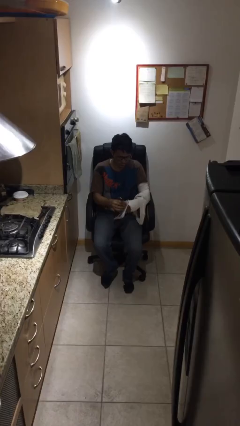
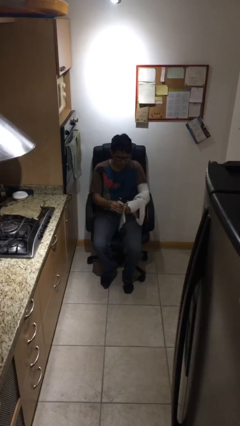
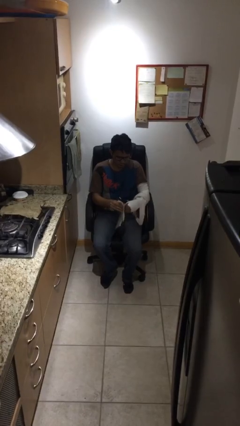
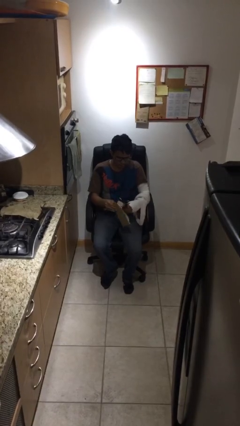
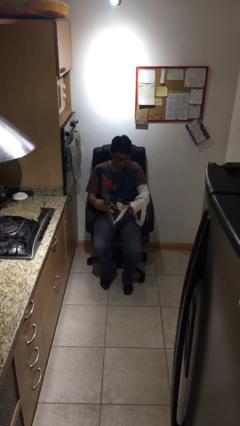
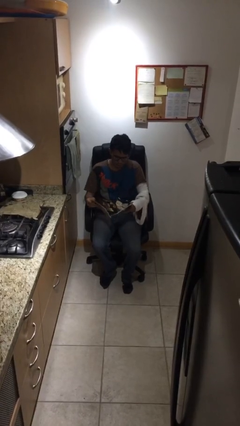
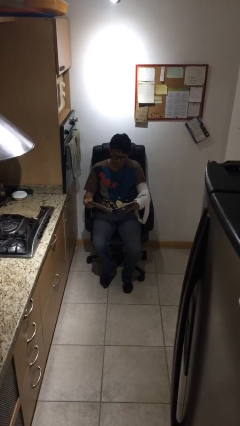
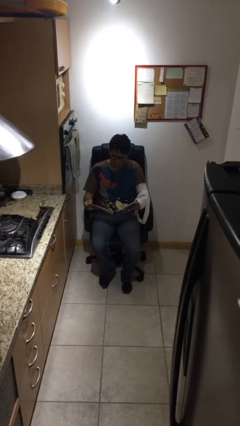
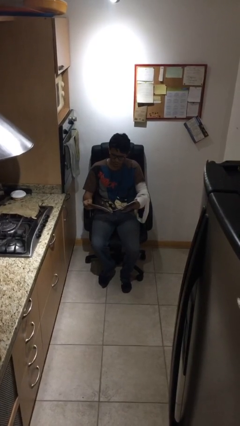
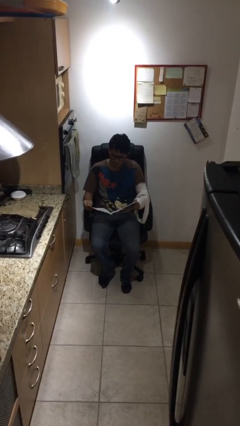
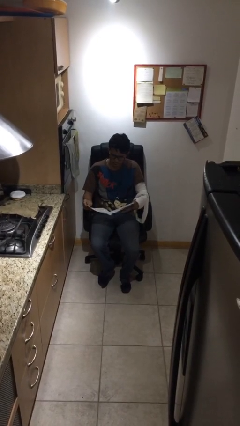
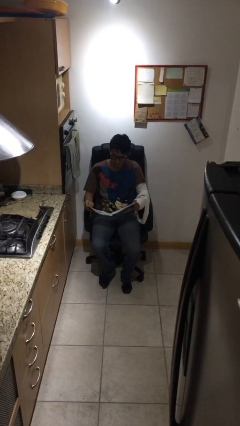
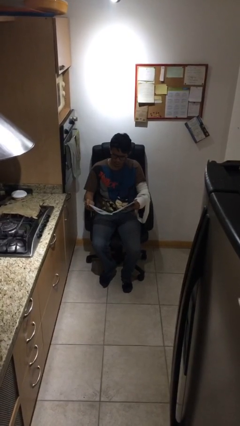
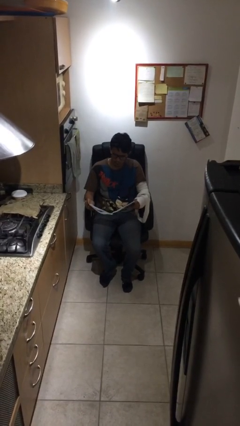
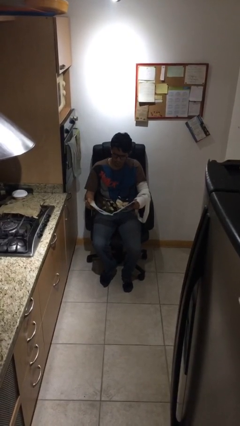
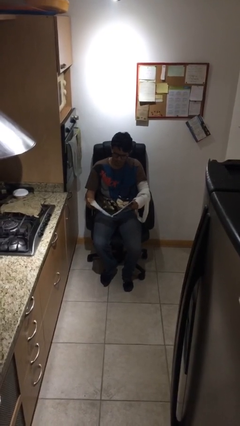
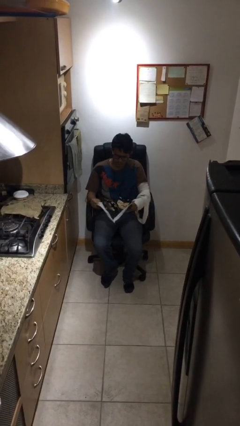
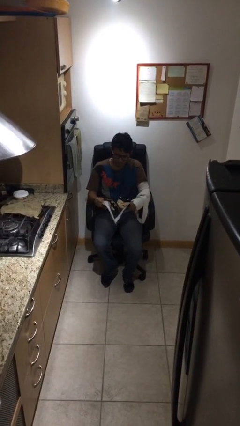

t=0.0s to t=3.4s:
person reads document

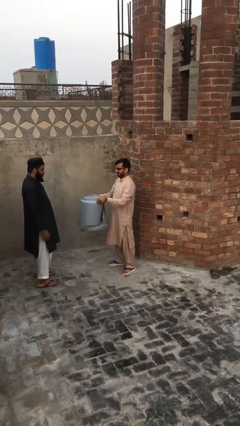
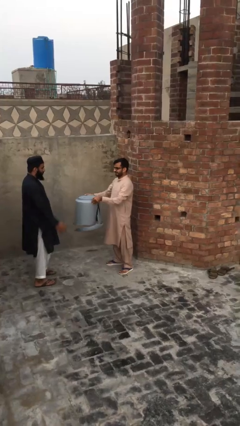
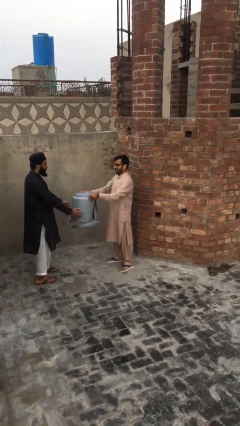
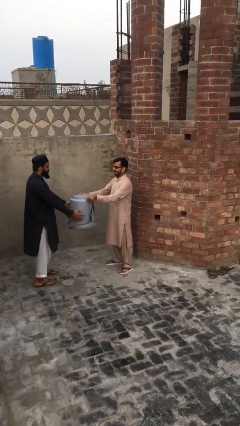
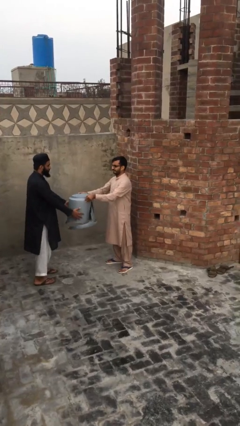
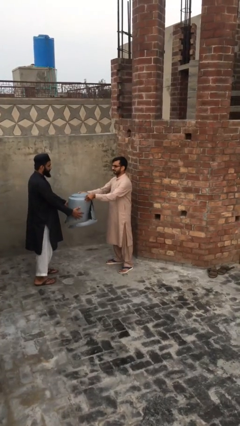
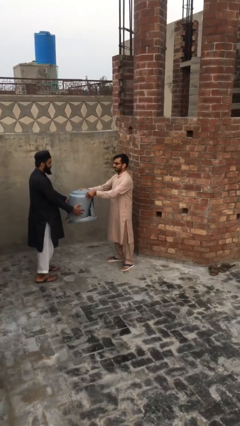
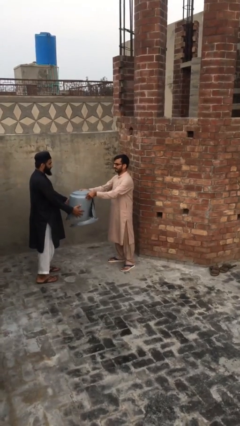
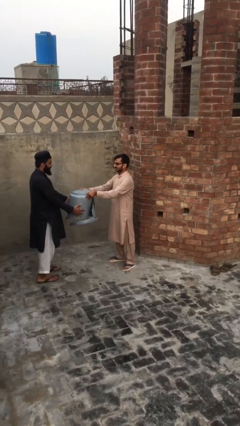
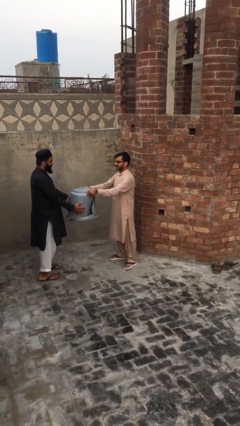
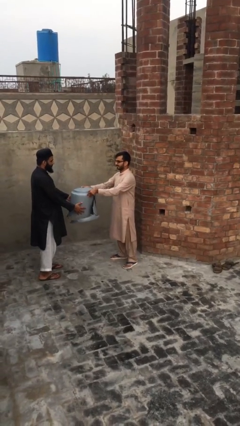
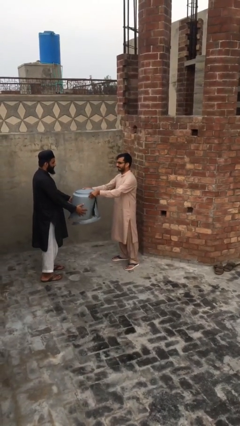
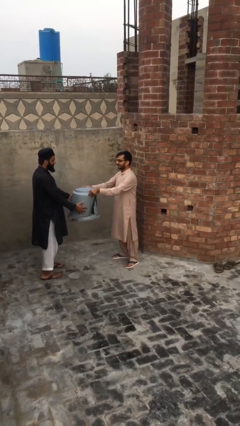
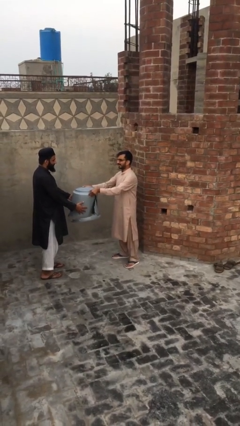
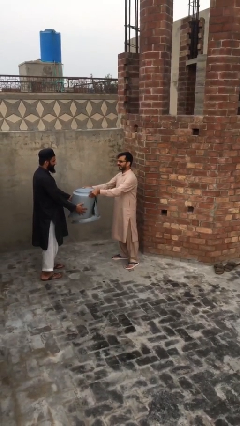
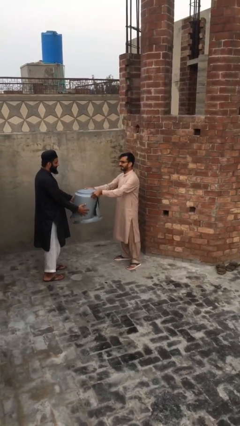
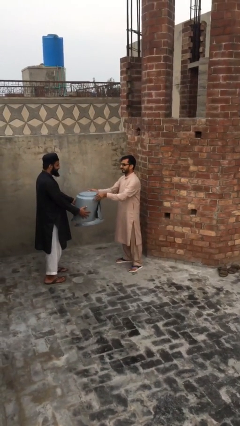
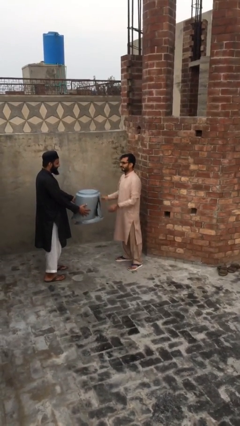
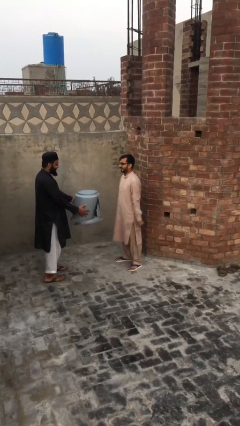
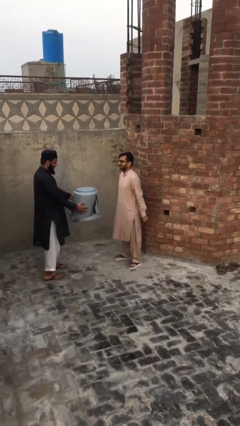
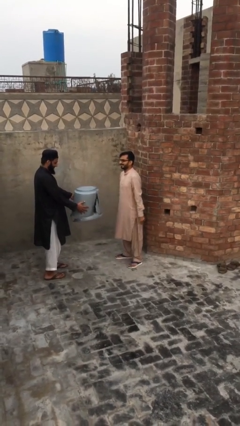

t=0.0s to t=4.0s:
person transfers object to person

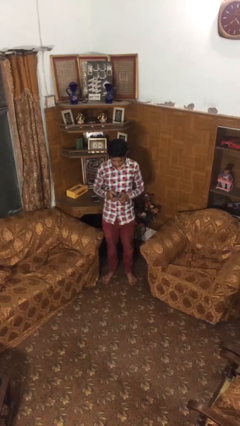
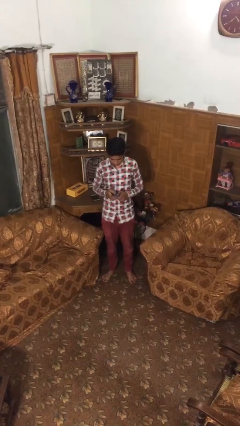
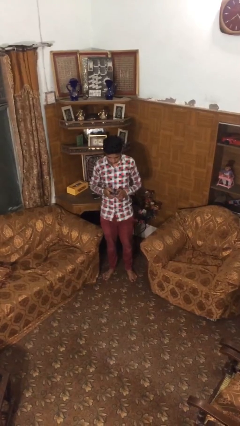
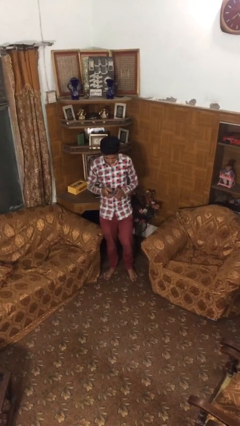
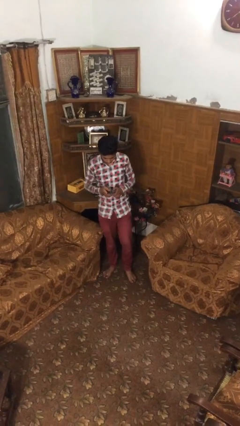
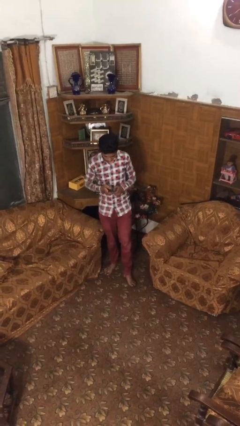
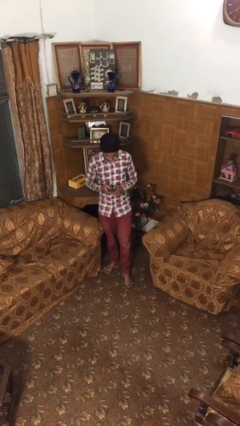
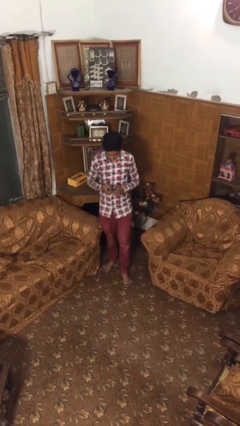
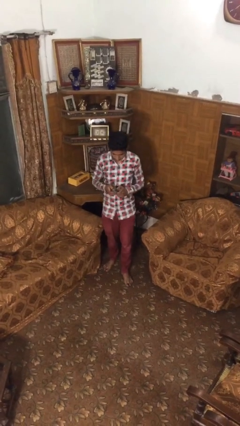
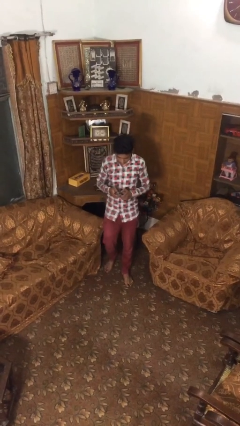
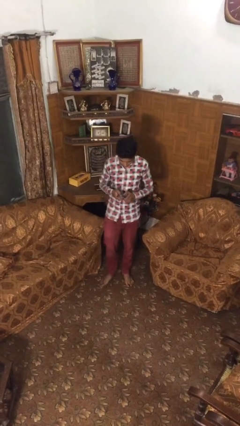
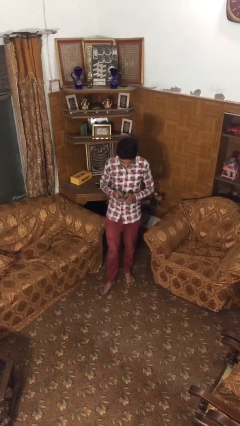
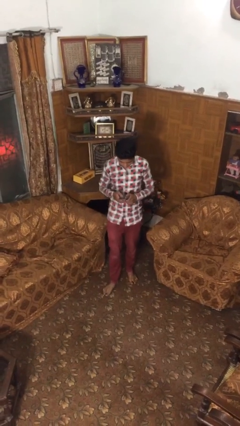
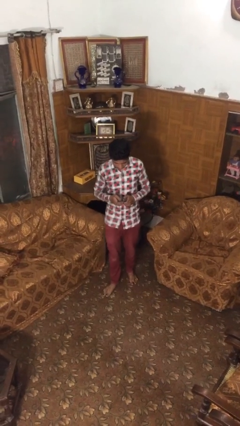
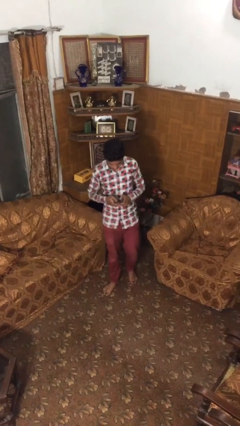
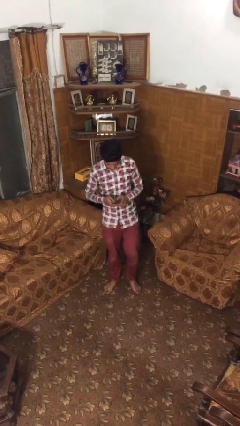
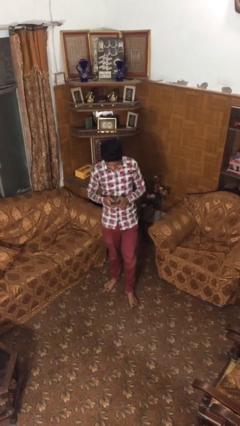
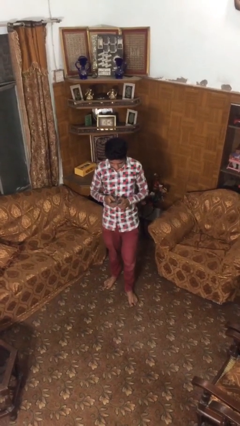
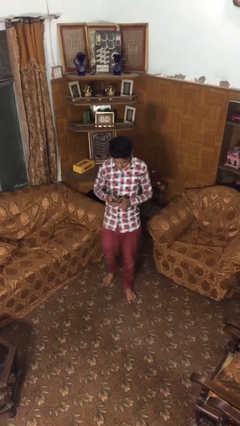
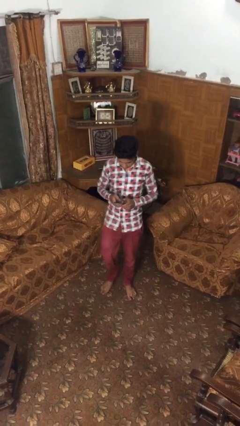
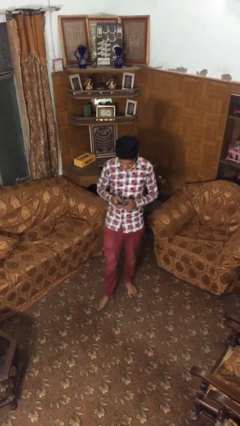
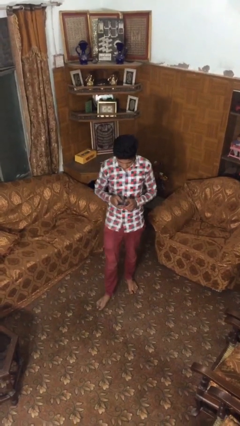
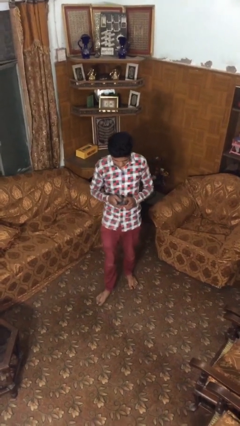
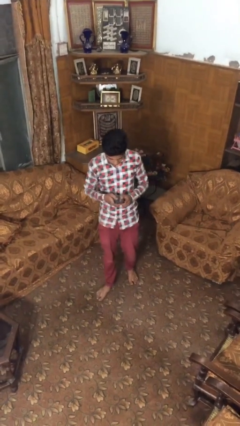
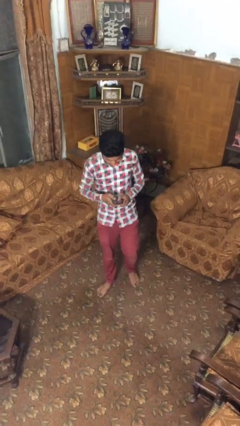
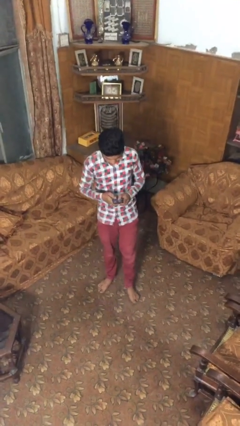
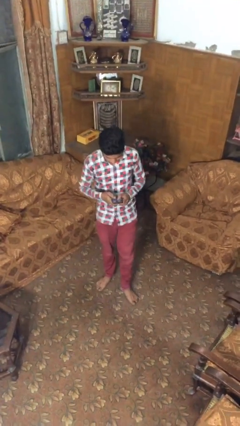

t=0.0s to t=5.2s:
person texts on phone

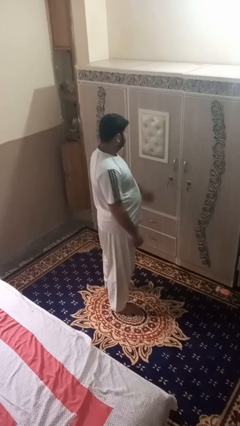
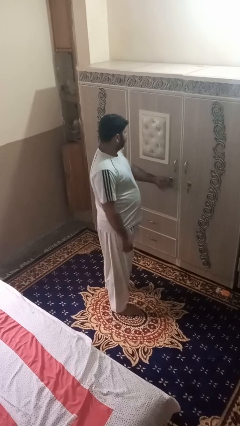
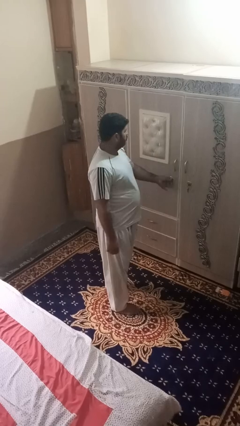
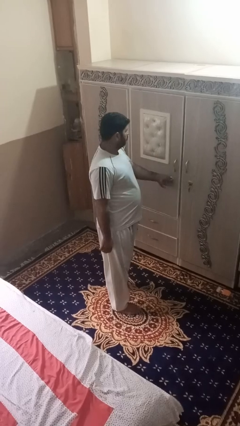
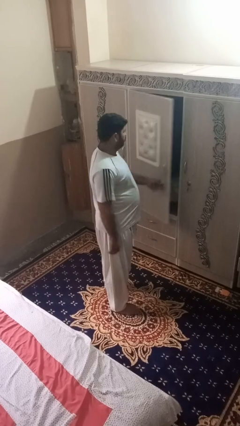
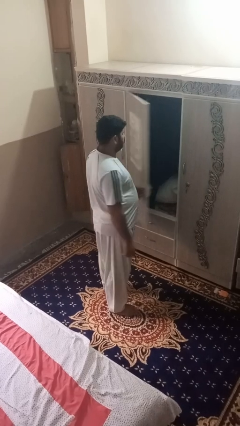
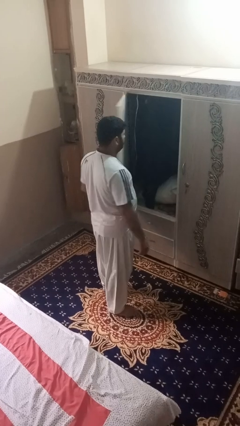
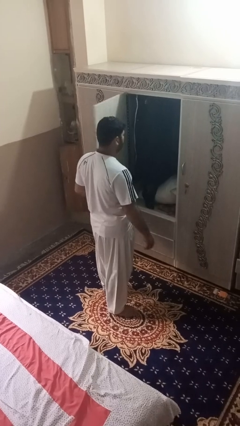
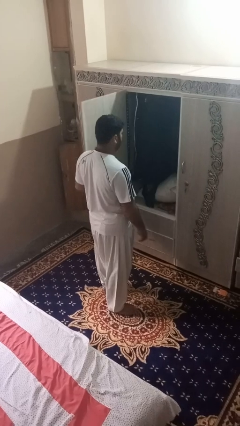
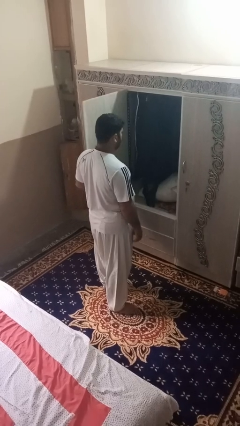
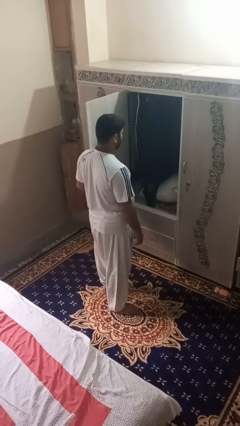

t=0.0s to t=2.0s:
person opens dresser drawer

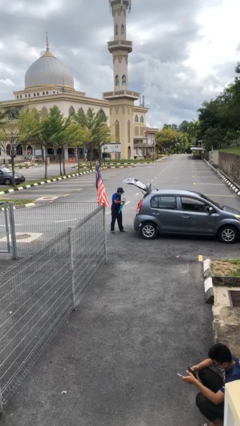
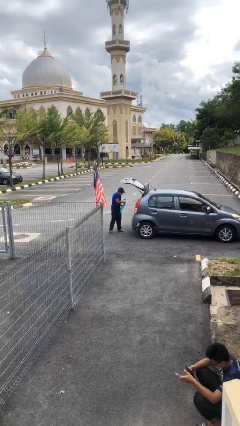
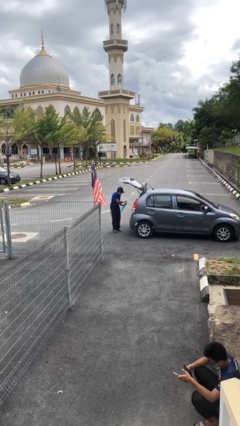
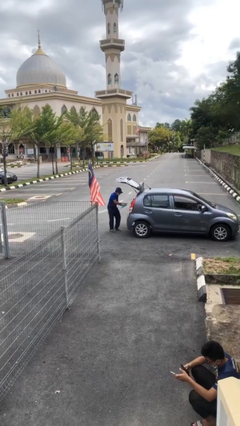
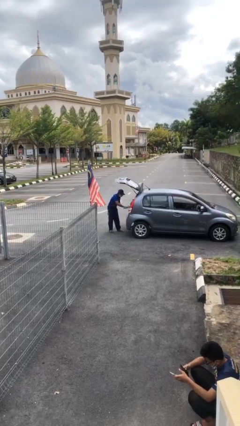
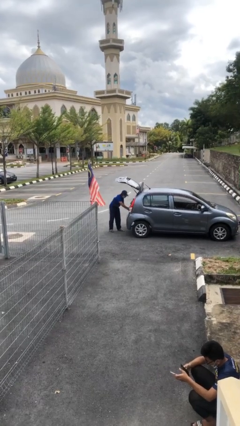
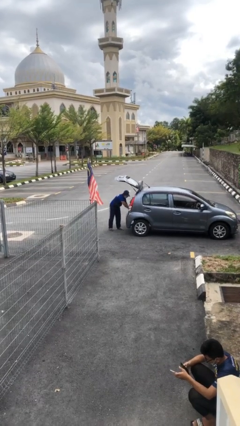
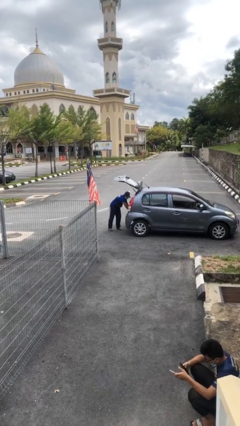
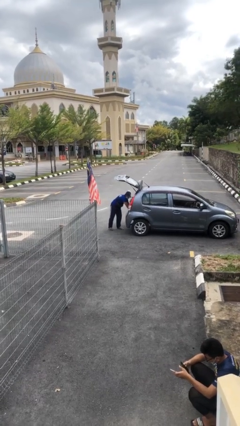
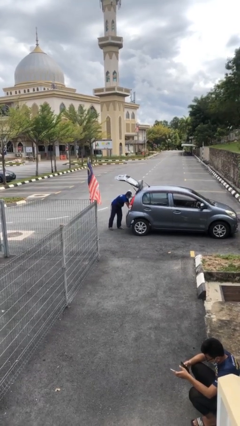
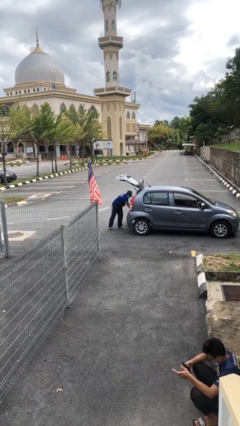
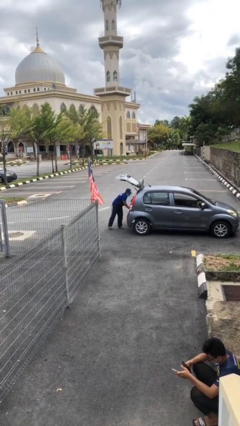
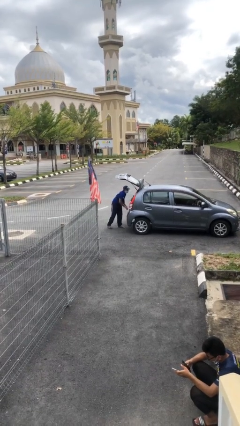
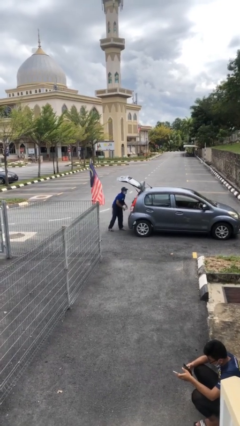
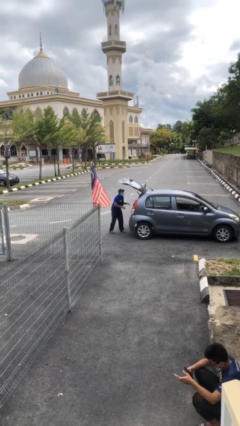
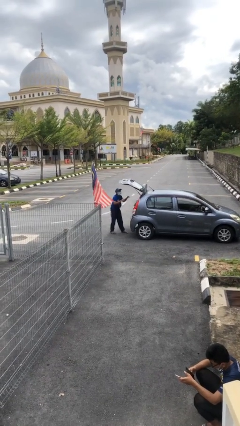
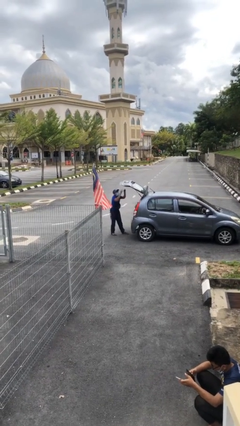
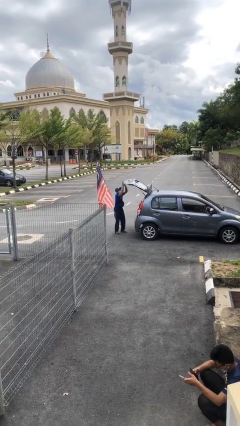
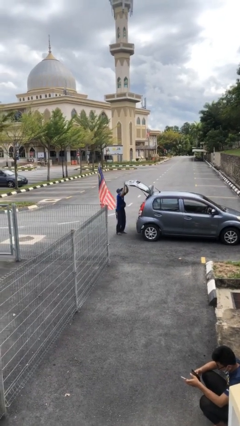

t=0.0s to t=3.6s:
person loads car
